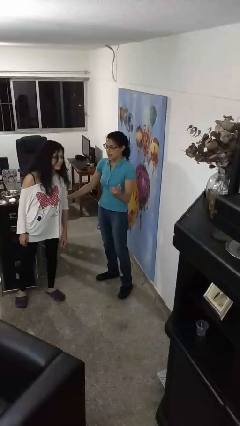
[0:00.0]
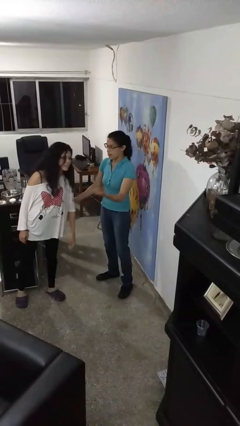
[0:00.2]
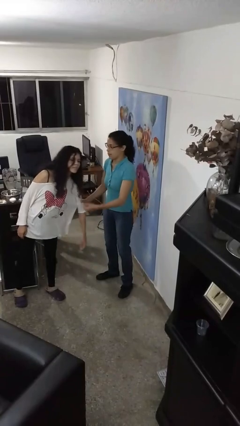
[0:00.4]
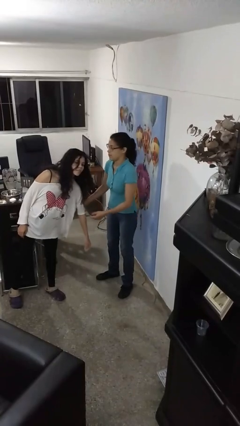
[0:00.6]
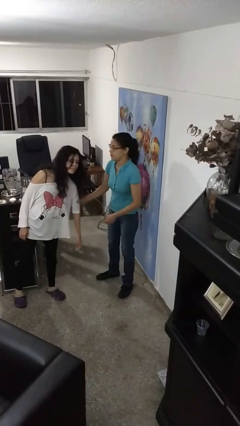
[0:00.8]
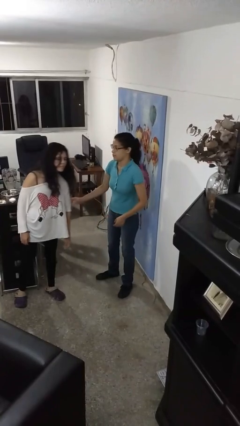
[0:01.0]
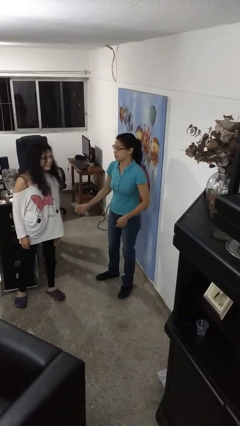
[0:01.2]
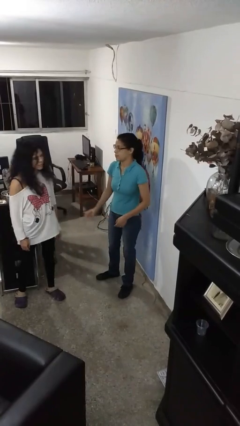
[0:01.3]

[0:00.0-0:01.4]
person grabs person by bicep

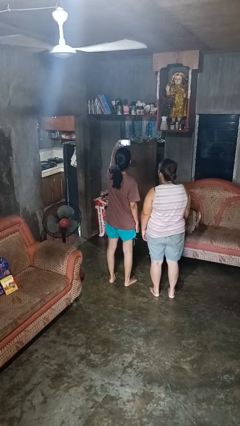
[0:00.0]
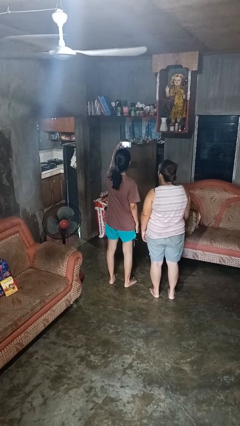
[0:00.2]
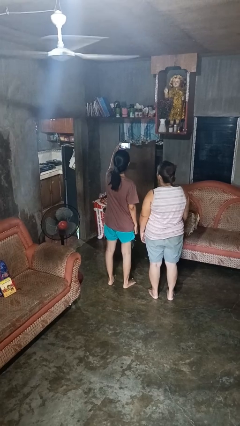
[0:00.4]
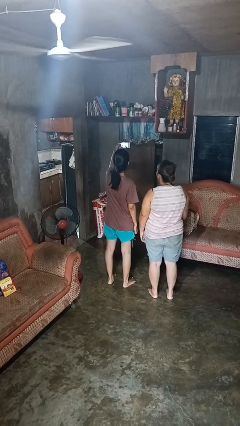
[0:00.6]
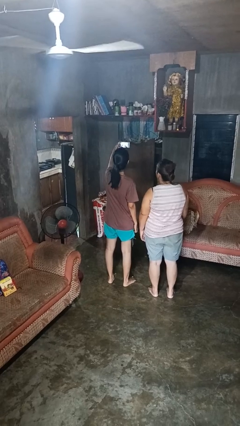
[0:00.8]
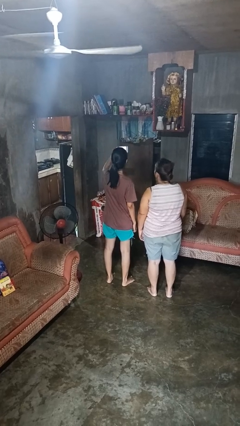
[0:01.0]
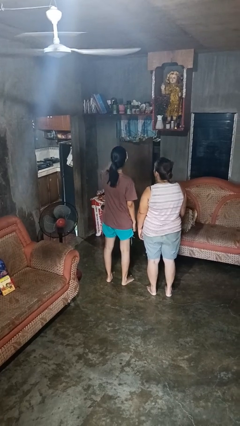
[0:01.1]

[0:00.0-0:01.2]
person takes selfie with person

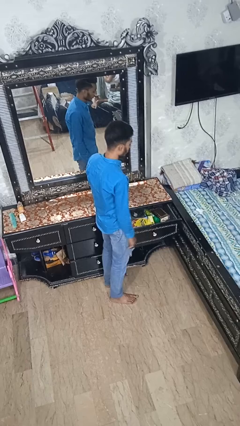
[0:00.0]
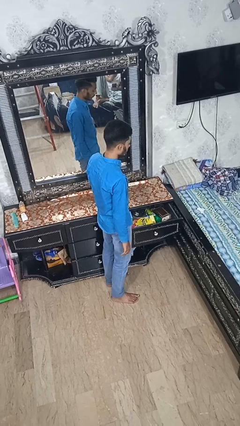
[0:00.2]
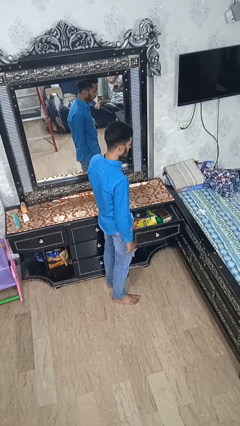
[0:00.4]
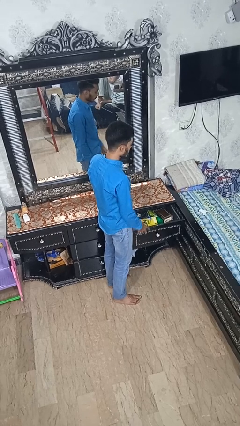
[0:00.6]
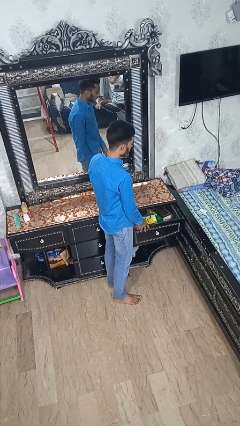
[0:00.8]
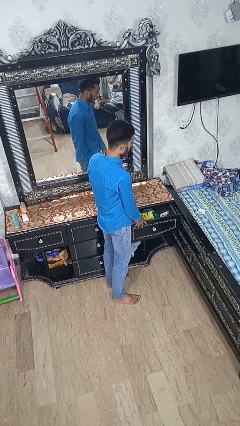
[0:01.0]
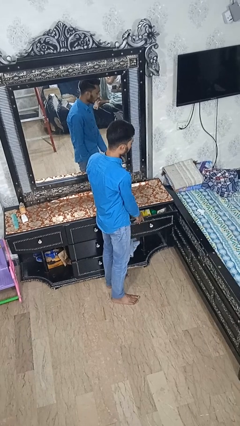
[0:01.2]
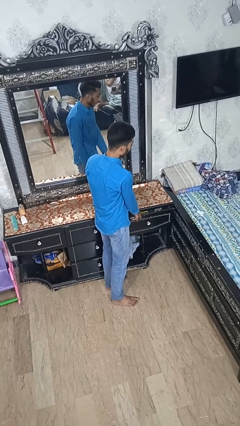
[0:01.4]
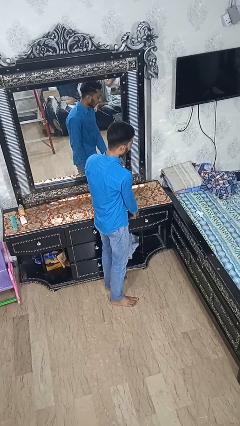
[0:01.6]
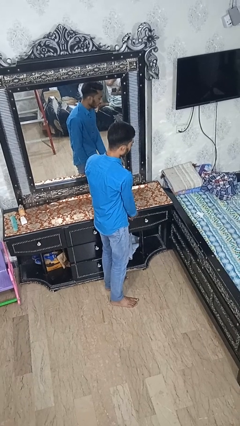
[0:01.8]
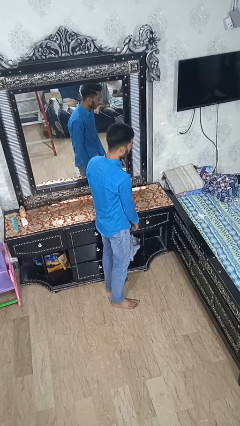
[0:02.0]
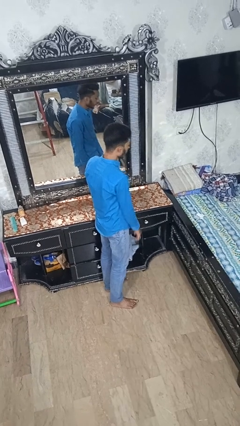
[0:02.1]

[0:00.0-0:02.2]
person closes dresser drawer

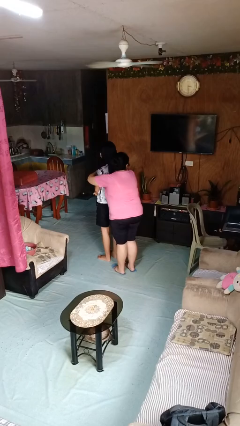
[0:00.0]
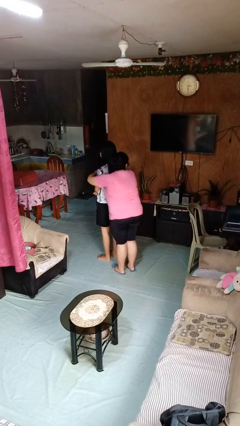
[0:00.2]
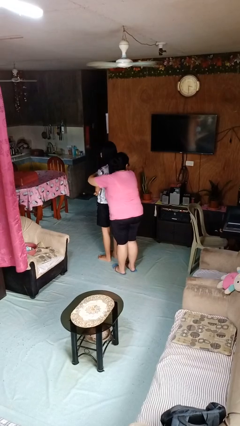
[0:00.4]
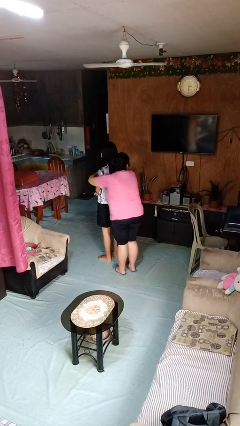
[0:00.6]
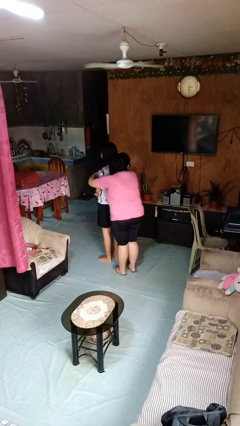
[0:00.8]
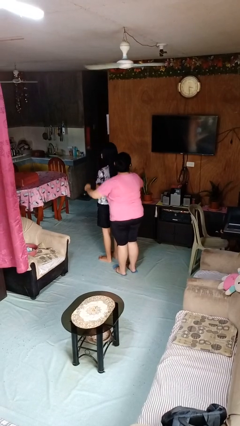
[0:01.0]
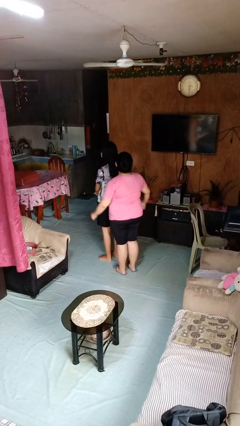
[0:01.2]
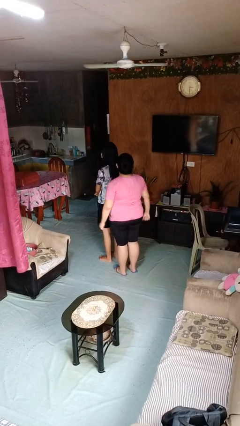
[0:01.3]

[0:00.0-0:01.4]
person hugs person from behind

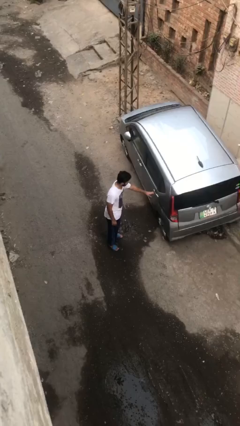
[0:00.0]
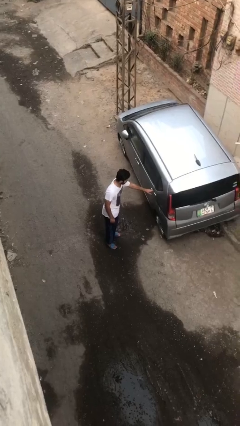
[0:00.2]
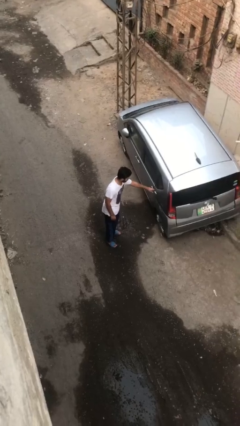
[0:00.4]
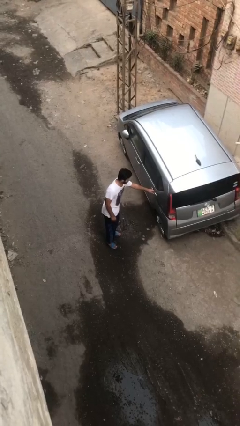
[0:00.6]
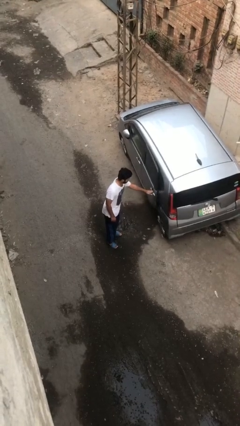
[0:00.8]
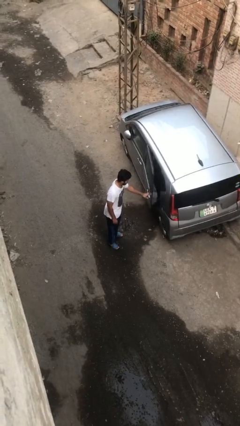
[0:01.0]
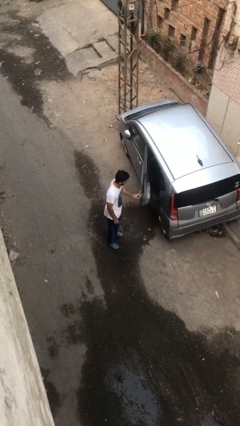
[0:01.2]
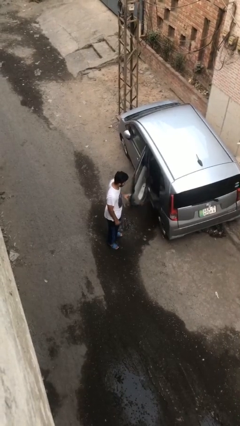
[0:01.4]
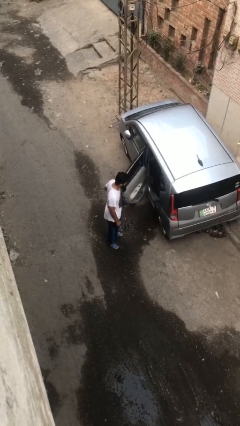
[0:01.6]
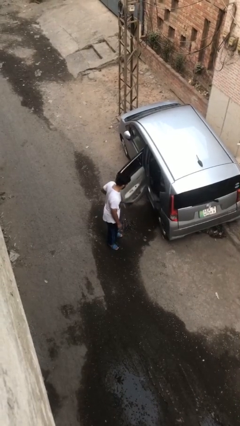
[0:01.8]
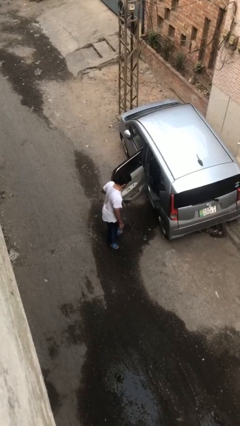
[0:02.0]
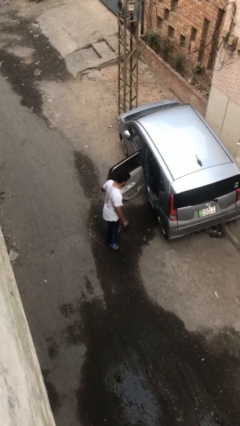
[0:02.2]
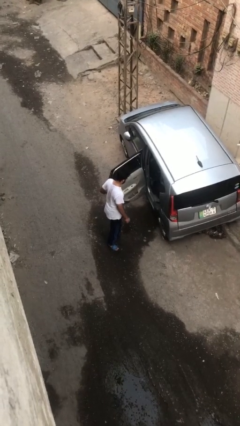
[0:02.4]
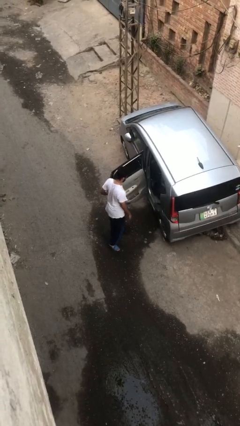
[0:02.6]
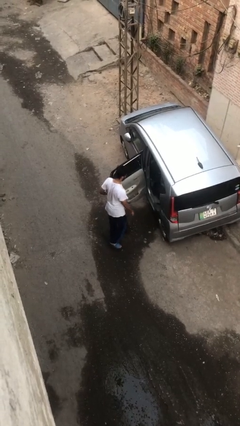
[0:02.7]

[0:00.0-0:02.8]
person opens car door

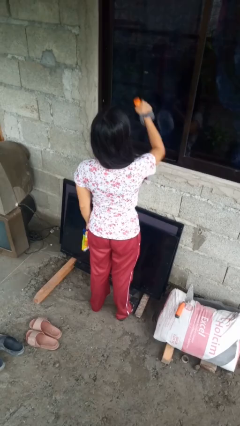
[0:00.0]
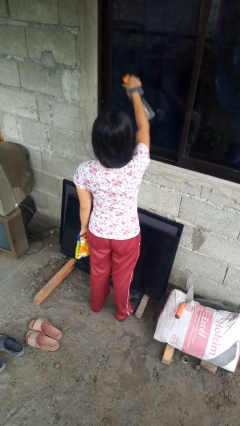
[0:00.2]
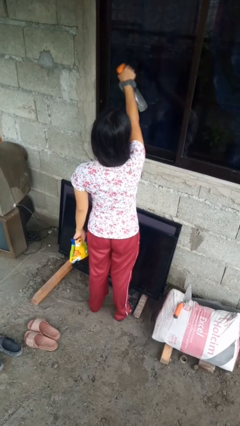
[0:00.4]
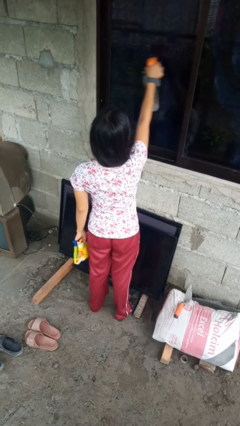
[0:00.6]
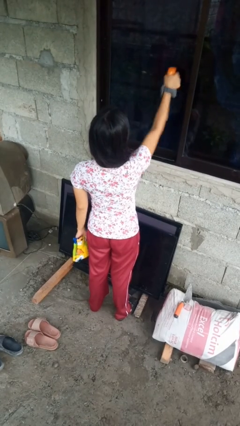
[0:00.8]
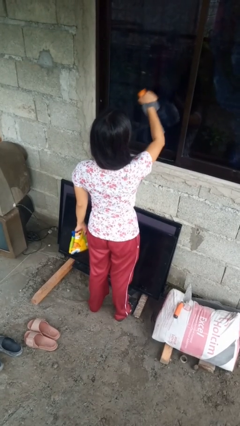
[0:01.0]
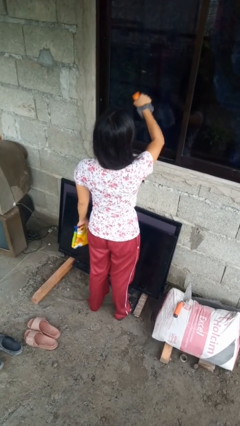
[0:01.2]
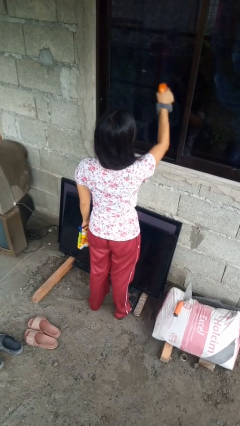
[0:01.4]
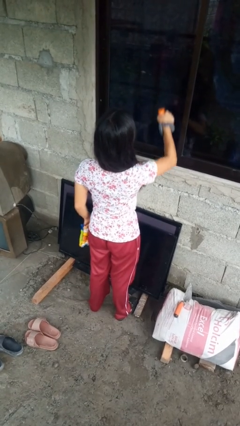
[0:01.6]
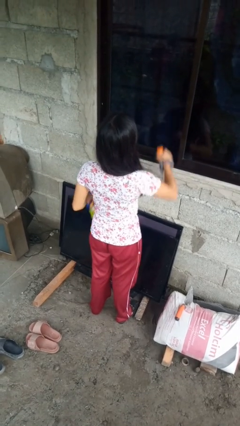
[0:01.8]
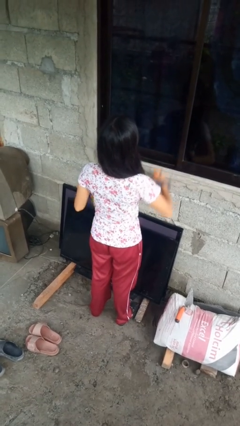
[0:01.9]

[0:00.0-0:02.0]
person sprays from bottle

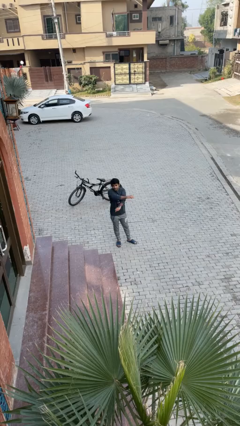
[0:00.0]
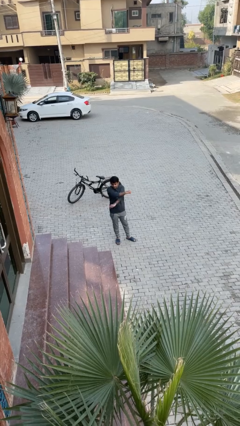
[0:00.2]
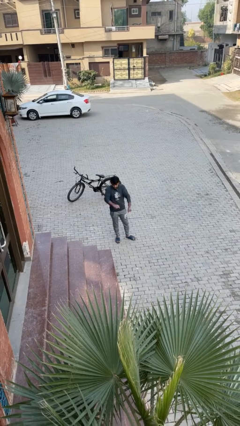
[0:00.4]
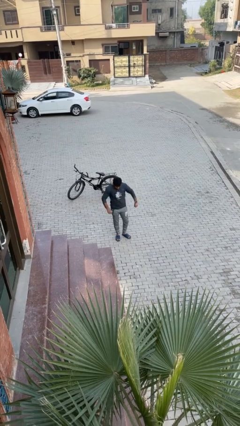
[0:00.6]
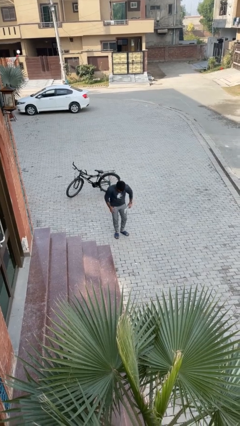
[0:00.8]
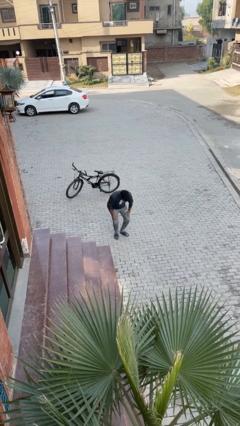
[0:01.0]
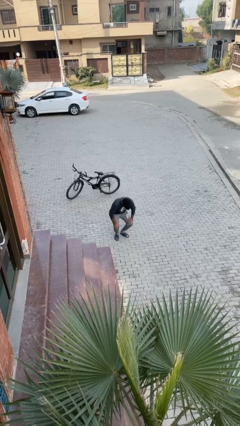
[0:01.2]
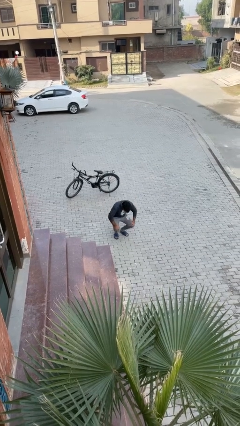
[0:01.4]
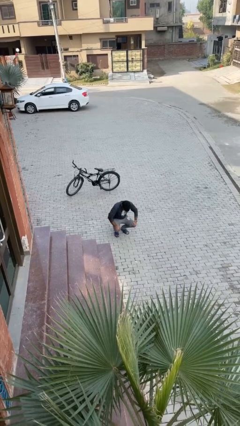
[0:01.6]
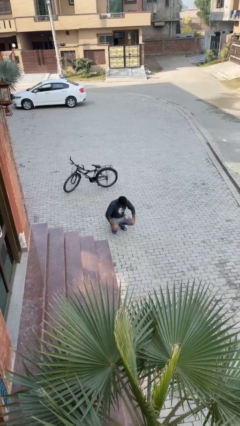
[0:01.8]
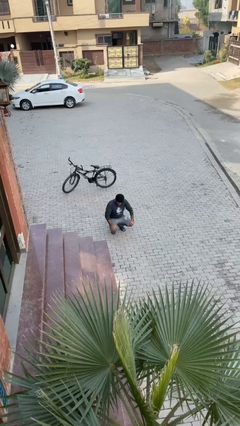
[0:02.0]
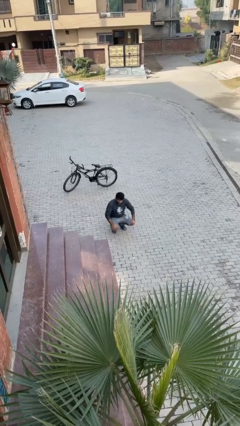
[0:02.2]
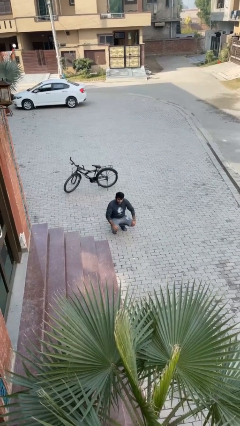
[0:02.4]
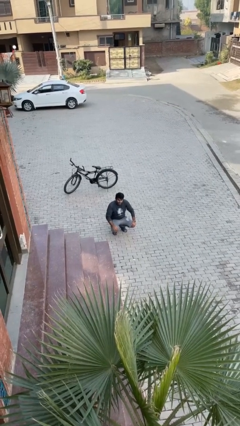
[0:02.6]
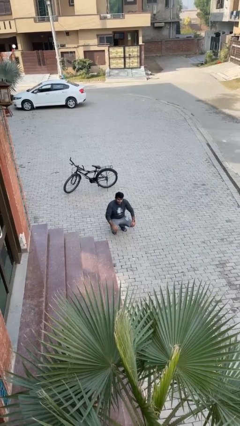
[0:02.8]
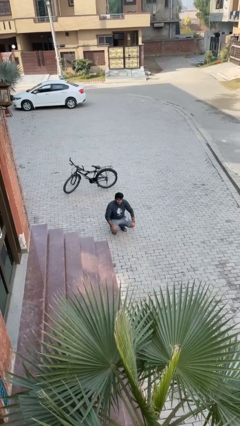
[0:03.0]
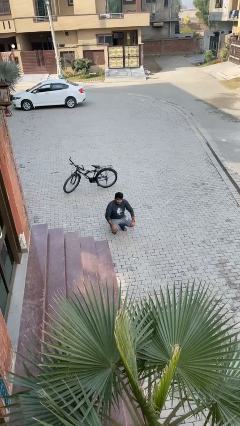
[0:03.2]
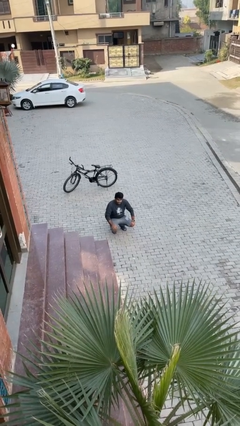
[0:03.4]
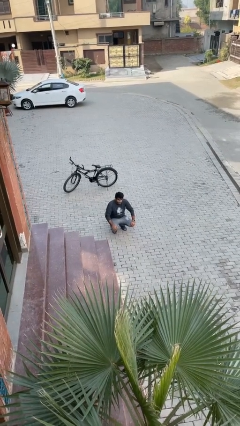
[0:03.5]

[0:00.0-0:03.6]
person sits down

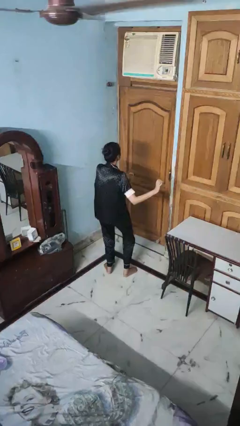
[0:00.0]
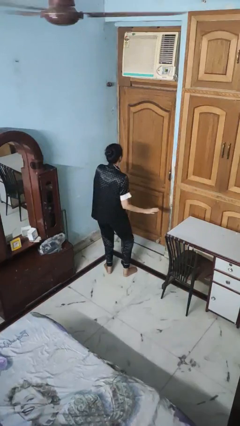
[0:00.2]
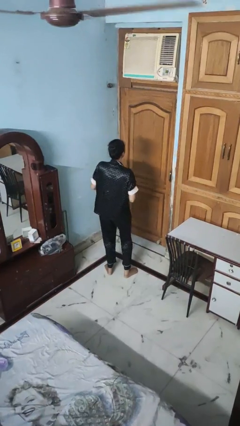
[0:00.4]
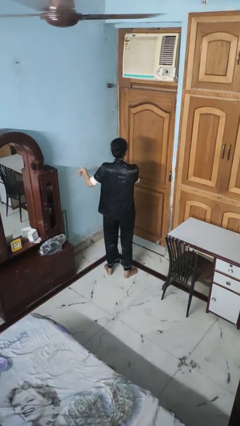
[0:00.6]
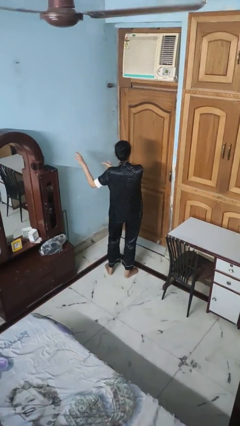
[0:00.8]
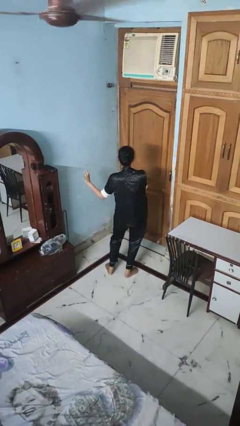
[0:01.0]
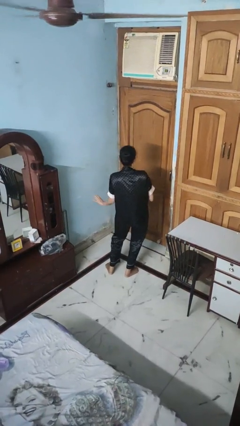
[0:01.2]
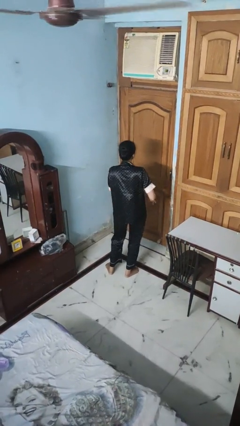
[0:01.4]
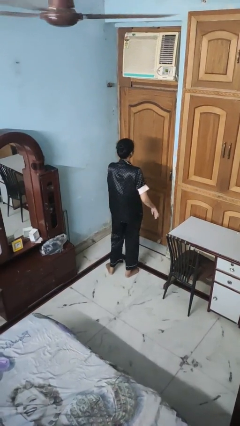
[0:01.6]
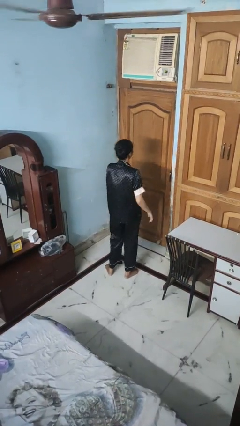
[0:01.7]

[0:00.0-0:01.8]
person dances in place

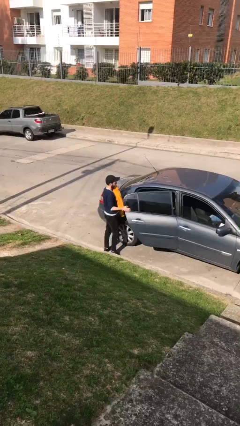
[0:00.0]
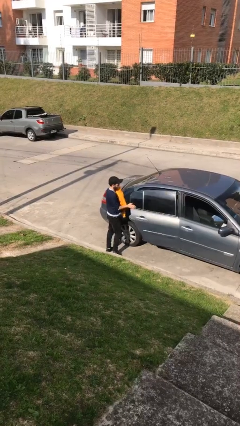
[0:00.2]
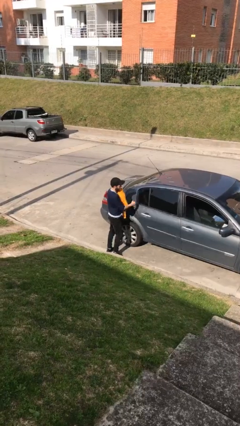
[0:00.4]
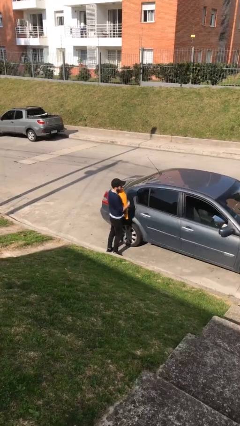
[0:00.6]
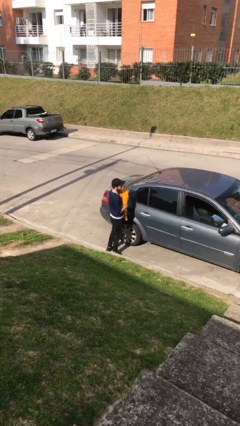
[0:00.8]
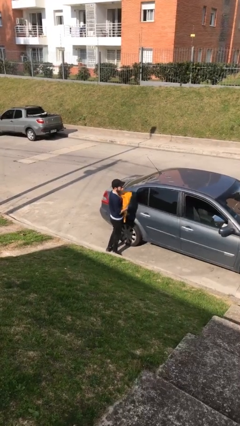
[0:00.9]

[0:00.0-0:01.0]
person closes car door
